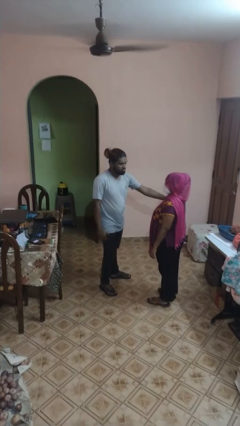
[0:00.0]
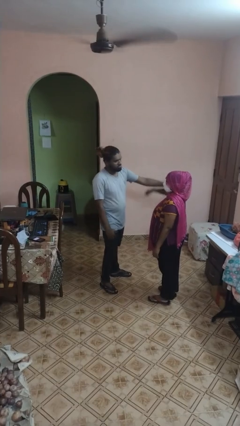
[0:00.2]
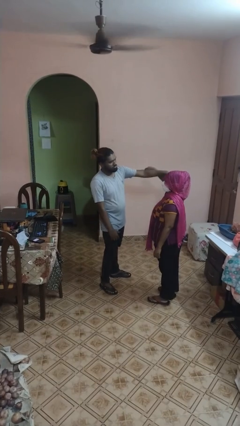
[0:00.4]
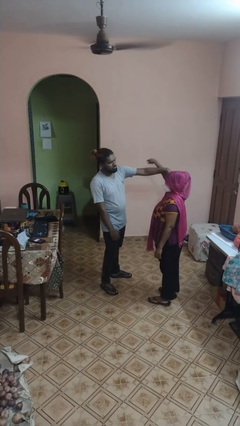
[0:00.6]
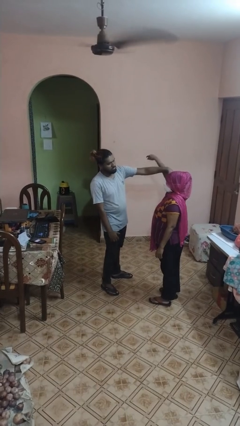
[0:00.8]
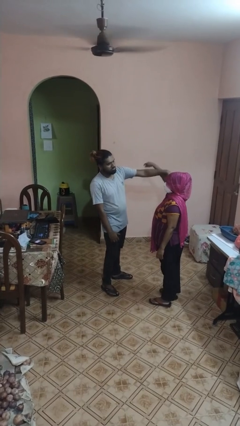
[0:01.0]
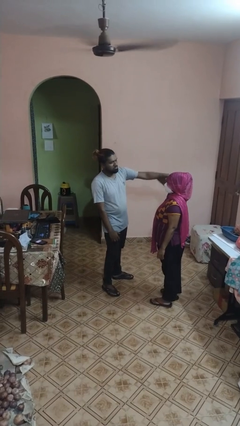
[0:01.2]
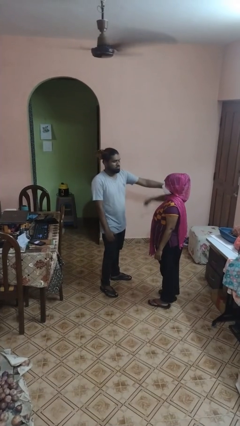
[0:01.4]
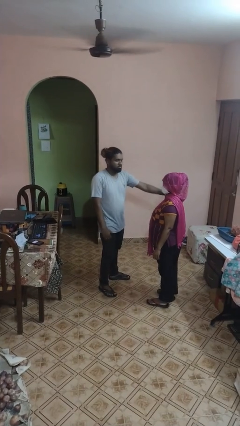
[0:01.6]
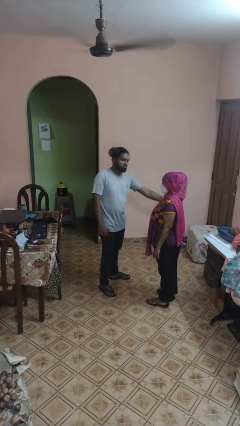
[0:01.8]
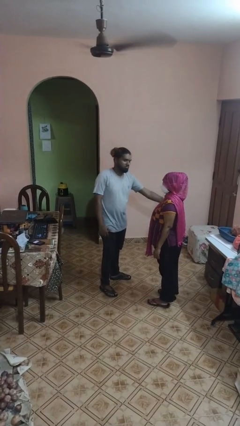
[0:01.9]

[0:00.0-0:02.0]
person grabs person by bicep

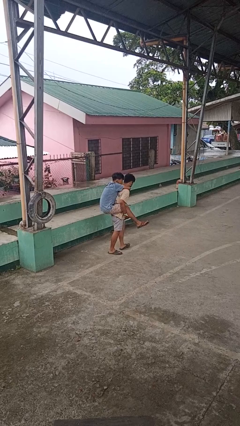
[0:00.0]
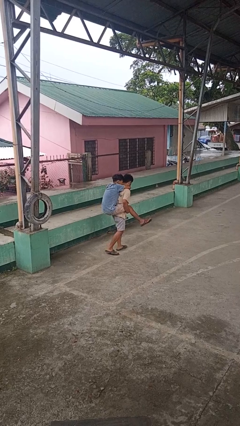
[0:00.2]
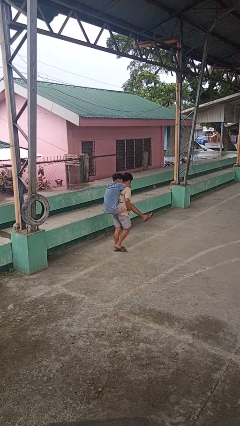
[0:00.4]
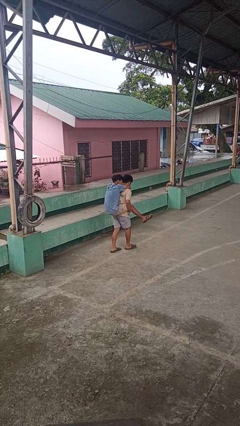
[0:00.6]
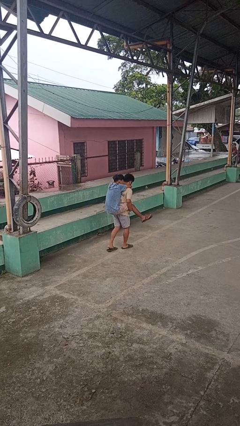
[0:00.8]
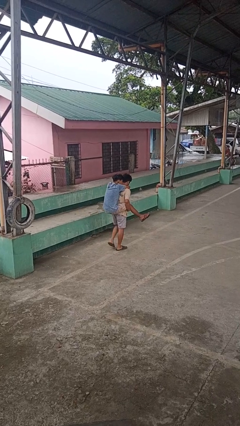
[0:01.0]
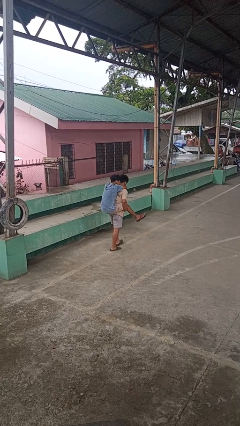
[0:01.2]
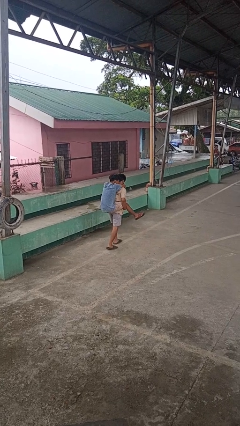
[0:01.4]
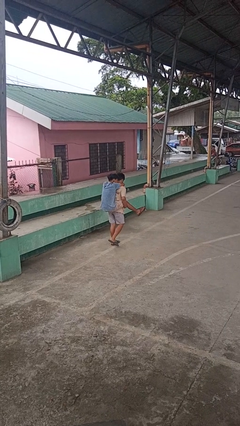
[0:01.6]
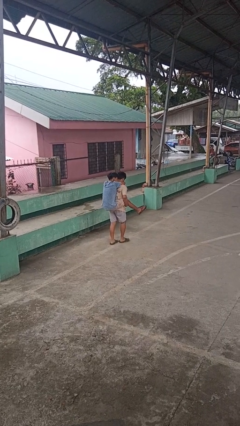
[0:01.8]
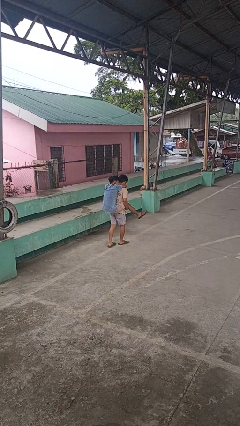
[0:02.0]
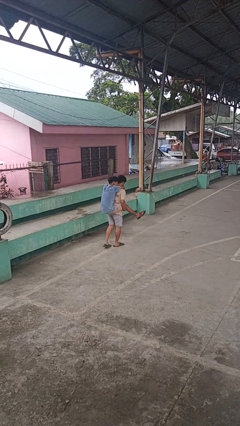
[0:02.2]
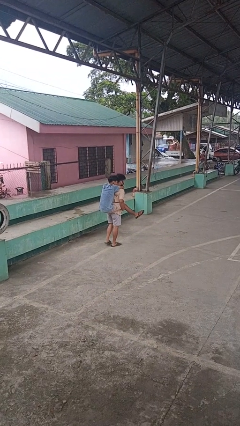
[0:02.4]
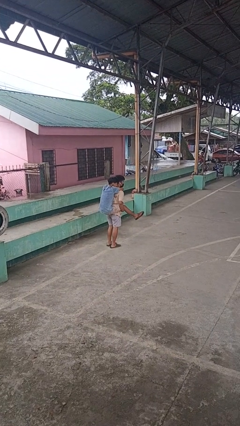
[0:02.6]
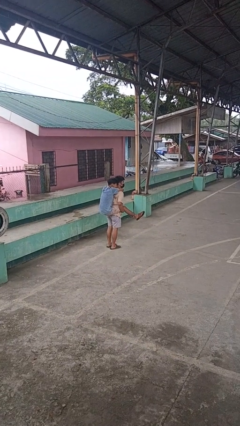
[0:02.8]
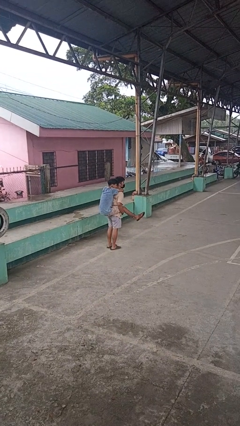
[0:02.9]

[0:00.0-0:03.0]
person carries person on back

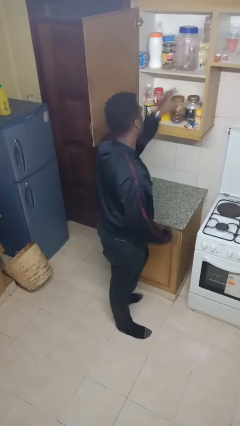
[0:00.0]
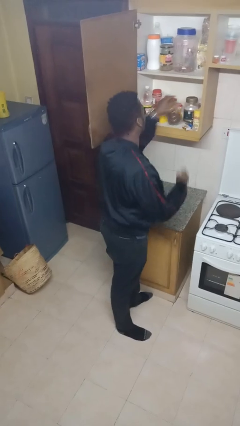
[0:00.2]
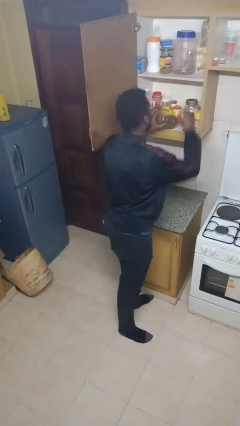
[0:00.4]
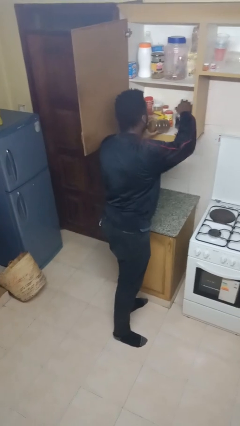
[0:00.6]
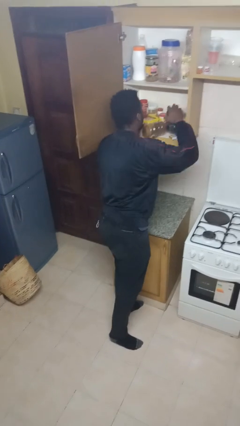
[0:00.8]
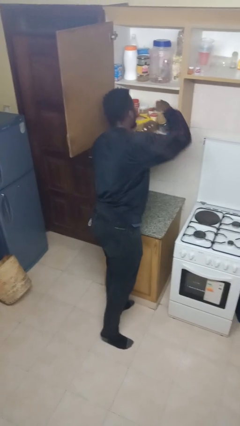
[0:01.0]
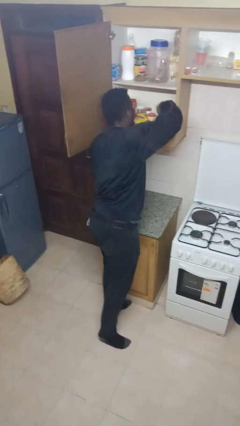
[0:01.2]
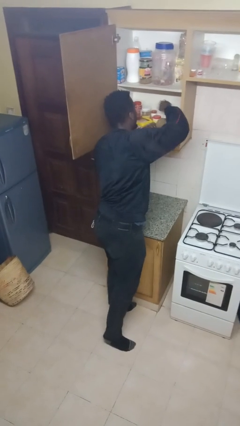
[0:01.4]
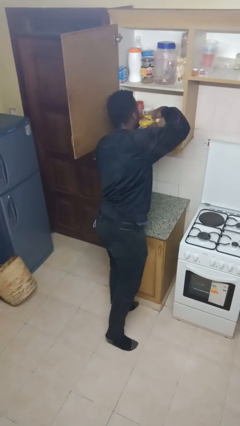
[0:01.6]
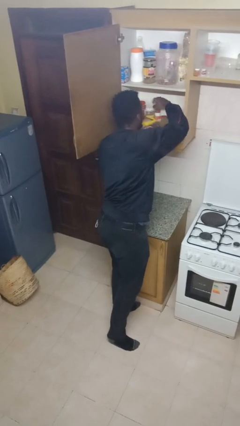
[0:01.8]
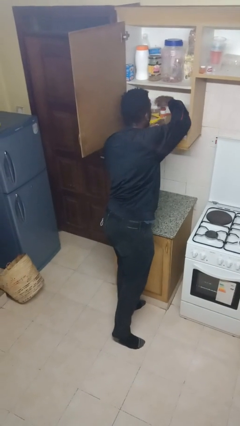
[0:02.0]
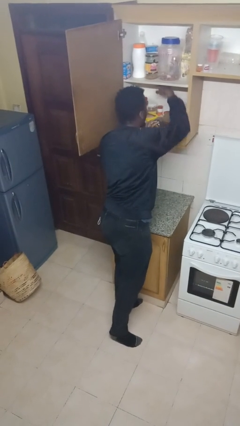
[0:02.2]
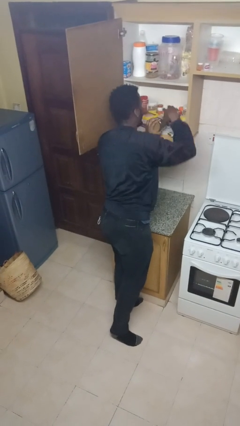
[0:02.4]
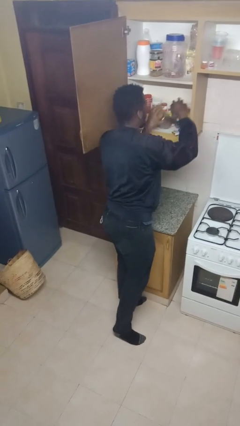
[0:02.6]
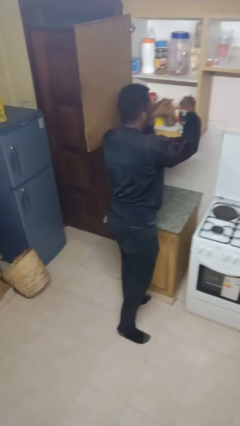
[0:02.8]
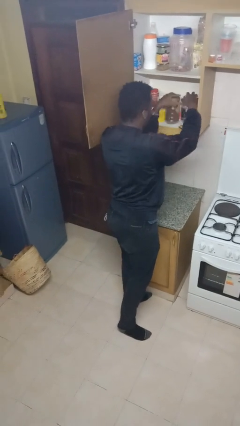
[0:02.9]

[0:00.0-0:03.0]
person searches in cabinet

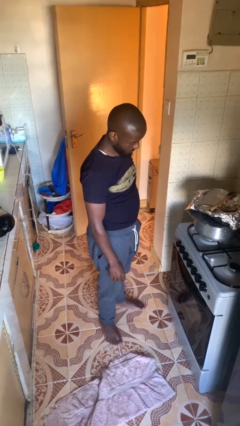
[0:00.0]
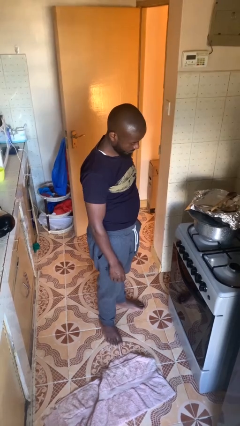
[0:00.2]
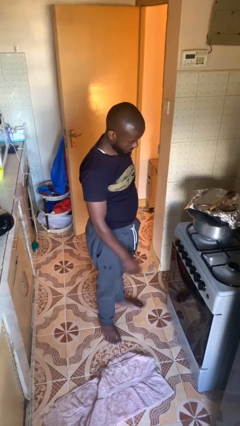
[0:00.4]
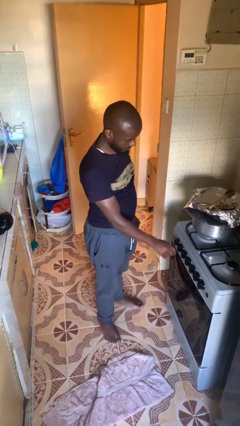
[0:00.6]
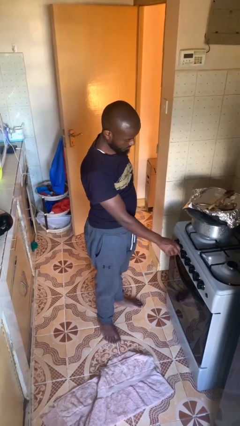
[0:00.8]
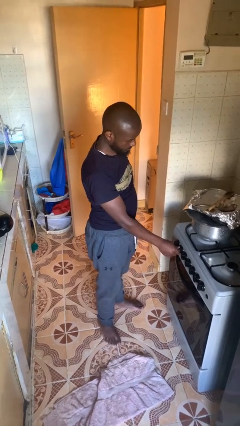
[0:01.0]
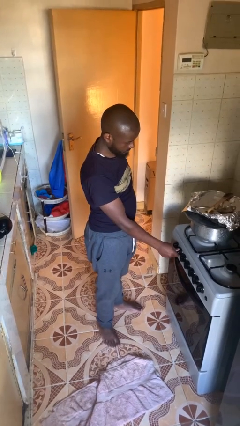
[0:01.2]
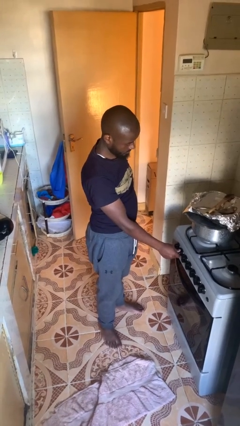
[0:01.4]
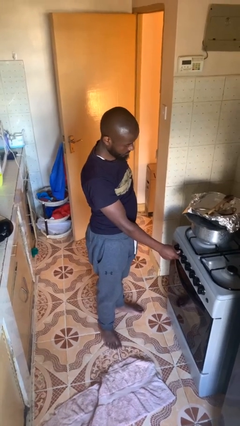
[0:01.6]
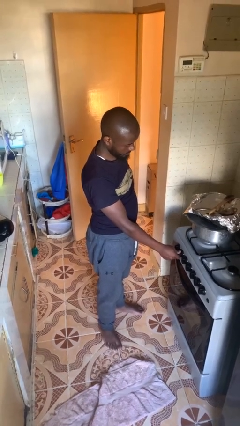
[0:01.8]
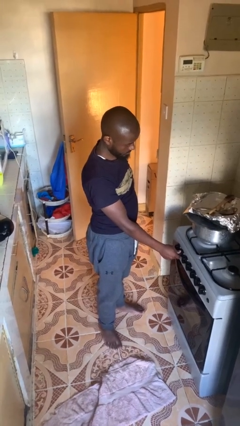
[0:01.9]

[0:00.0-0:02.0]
person adjusts thermostat

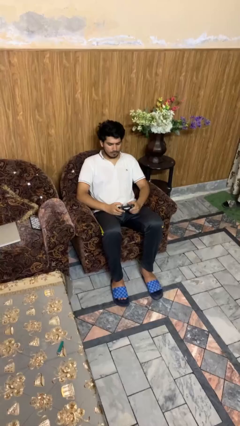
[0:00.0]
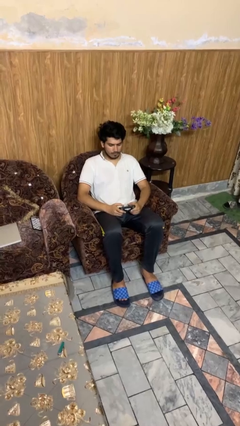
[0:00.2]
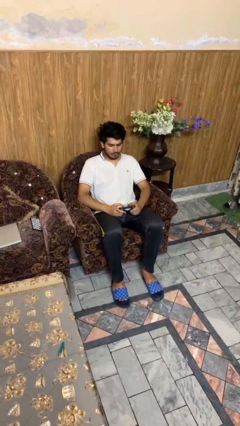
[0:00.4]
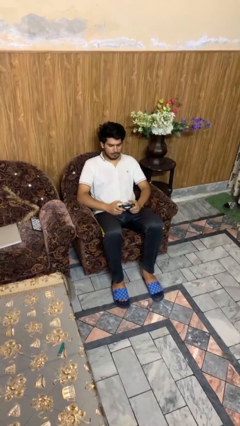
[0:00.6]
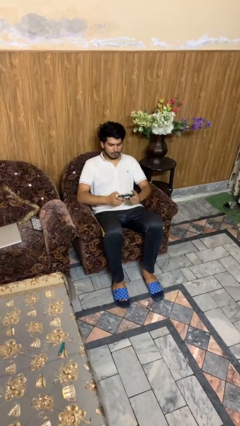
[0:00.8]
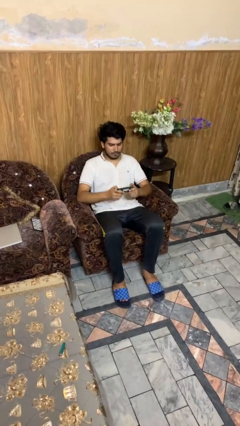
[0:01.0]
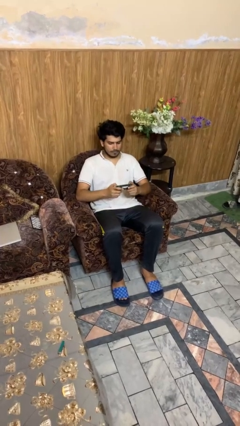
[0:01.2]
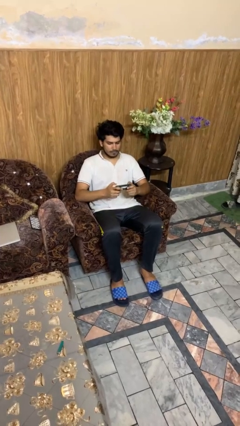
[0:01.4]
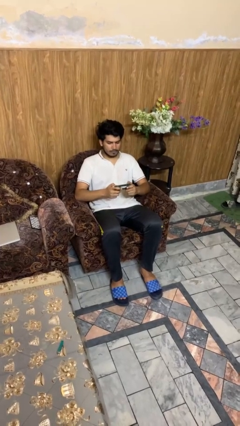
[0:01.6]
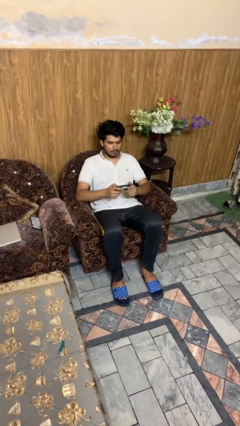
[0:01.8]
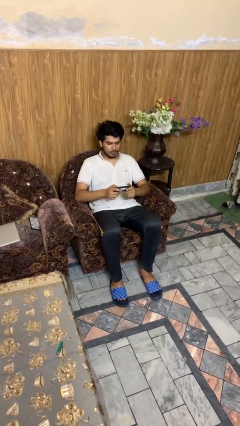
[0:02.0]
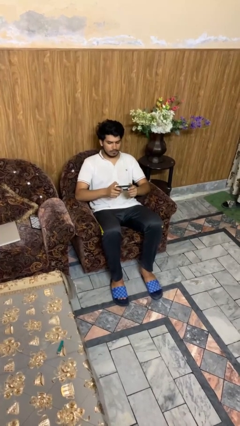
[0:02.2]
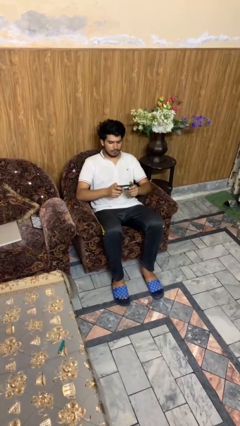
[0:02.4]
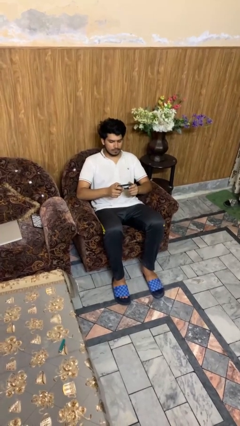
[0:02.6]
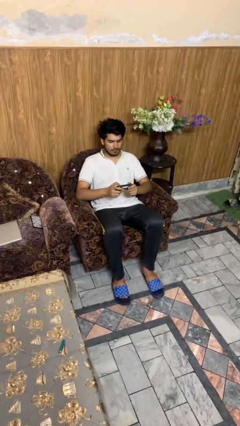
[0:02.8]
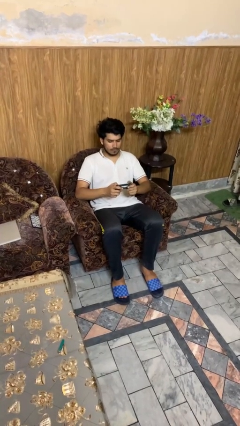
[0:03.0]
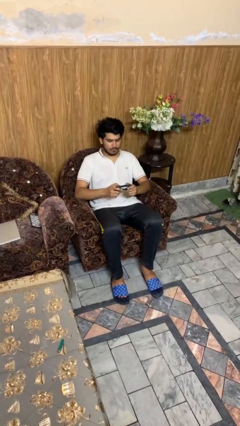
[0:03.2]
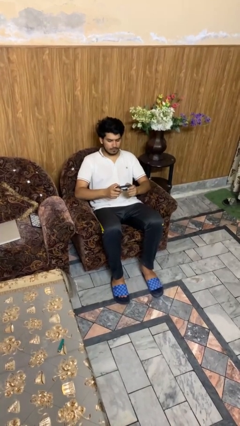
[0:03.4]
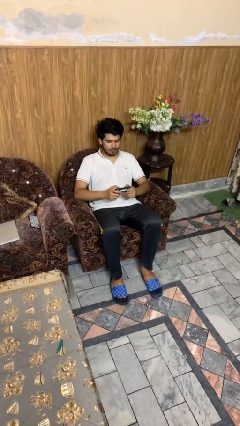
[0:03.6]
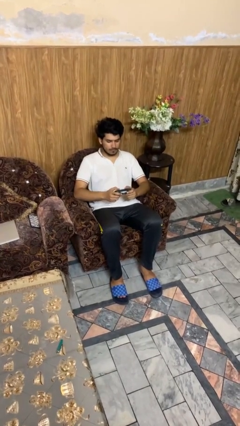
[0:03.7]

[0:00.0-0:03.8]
person interacts with handheld game

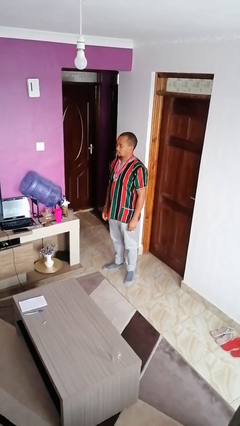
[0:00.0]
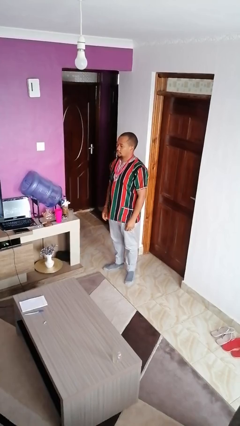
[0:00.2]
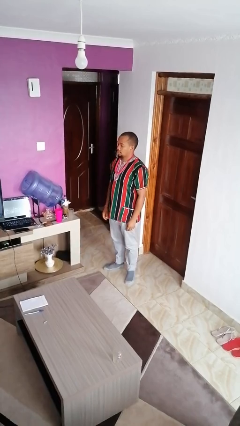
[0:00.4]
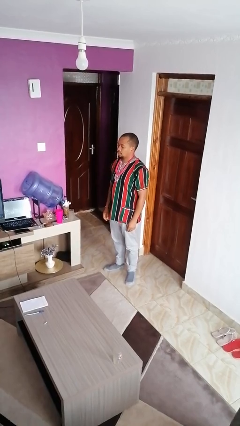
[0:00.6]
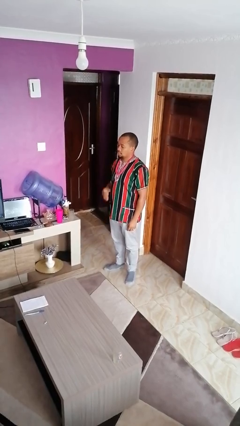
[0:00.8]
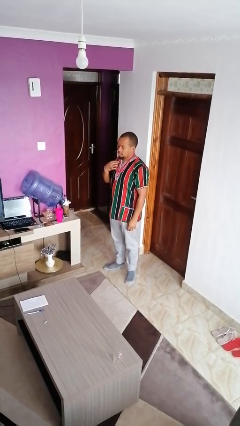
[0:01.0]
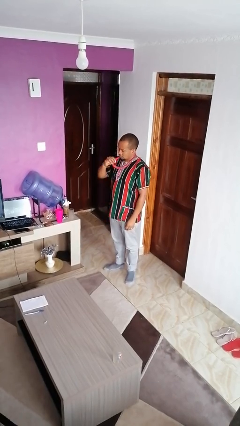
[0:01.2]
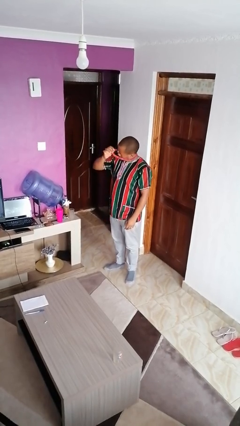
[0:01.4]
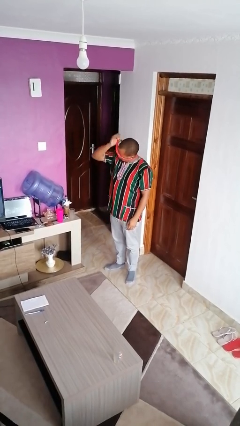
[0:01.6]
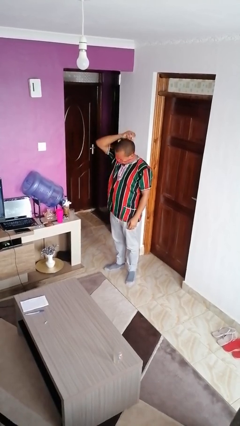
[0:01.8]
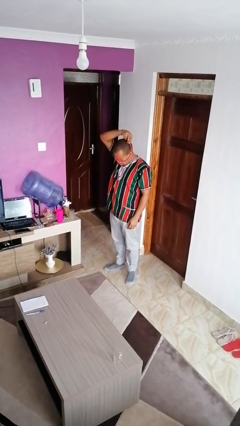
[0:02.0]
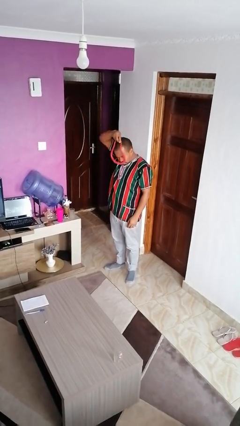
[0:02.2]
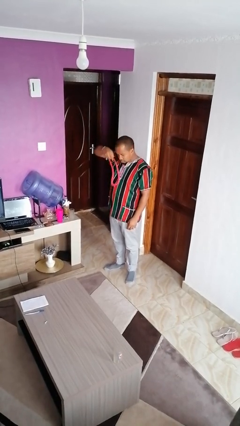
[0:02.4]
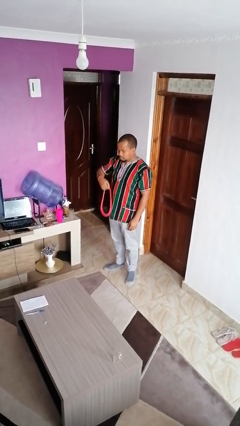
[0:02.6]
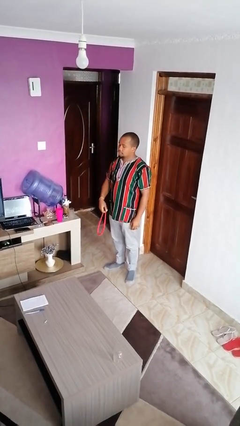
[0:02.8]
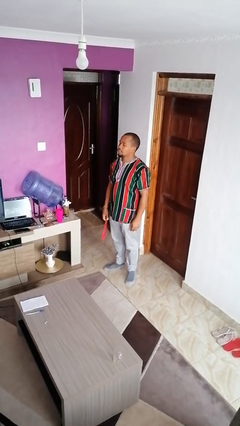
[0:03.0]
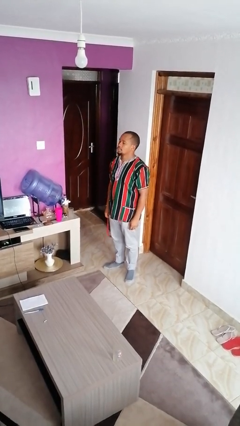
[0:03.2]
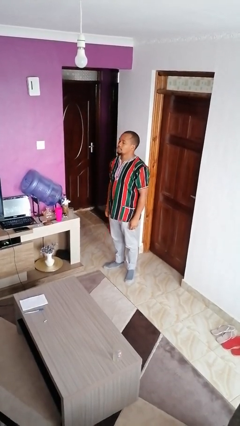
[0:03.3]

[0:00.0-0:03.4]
person takes off necklace
